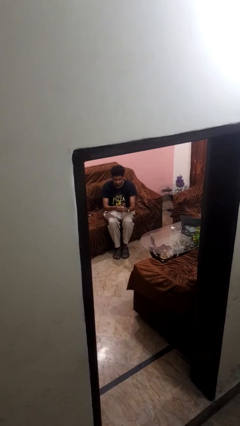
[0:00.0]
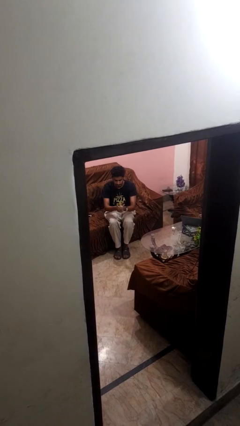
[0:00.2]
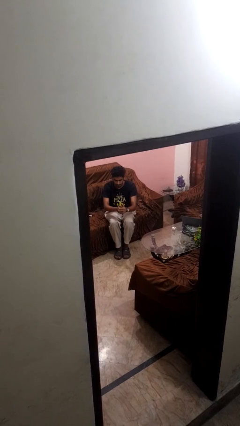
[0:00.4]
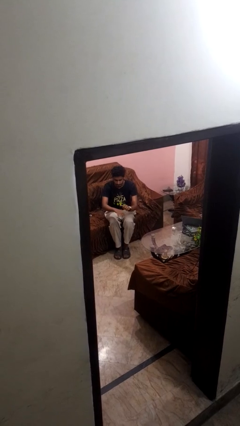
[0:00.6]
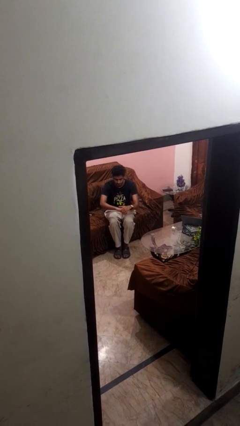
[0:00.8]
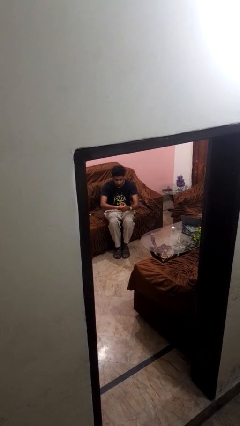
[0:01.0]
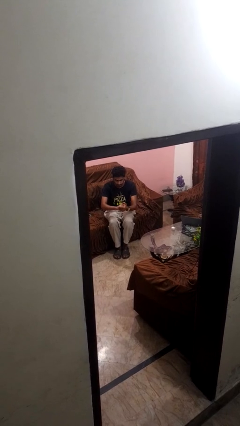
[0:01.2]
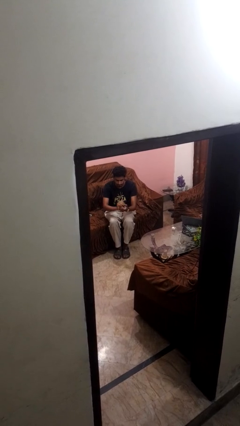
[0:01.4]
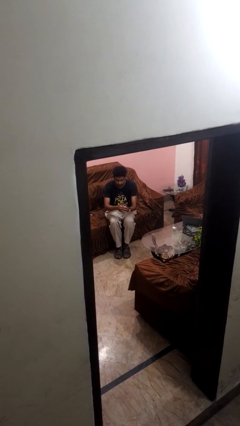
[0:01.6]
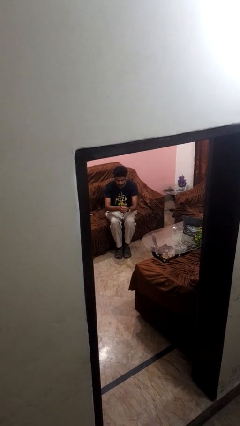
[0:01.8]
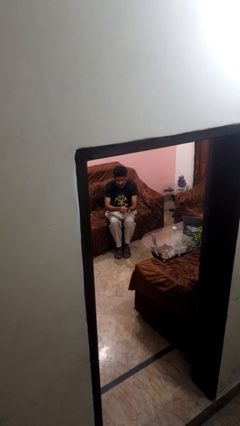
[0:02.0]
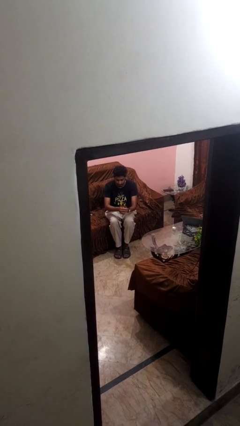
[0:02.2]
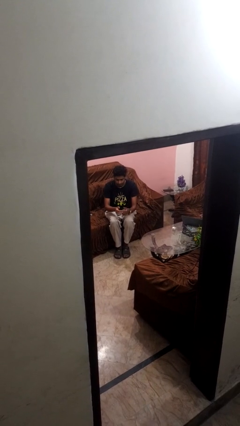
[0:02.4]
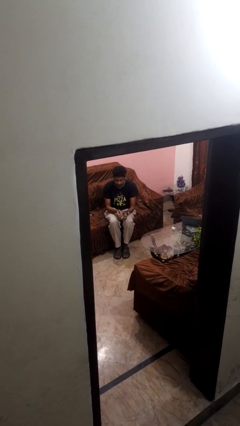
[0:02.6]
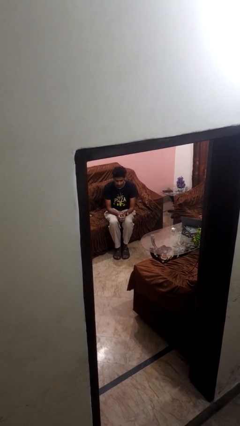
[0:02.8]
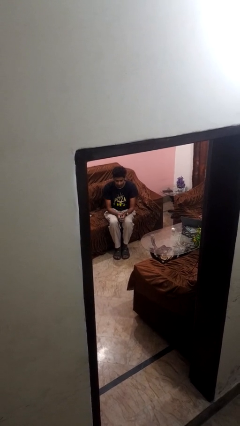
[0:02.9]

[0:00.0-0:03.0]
person cracks knuckles

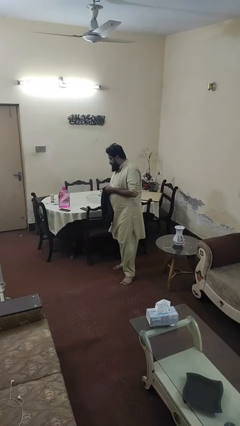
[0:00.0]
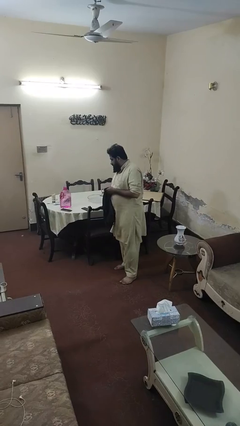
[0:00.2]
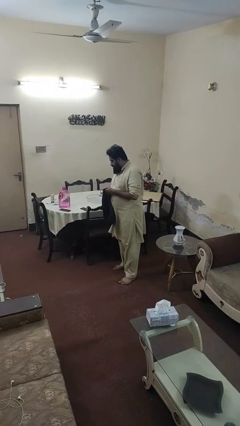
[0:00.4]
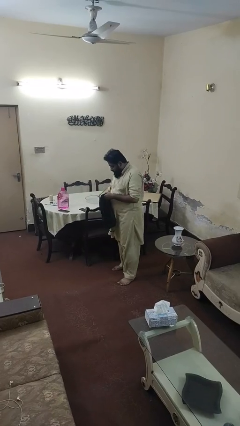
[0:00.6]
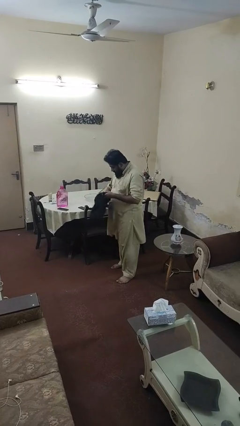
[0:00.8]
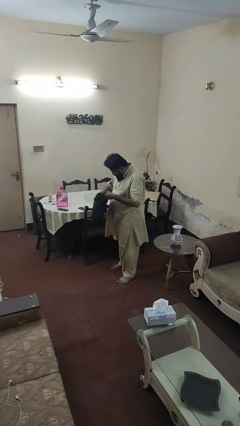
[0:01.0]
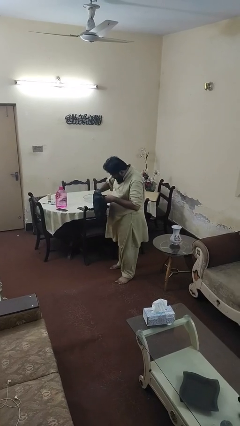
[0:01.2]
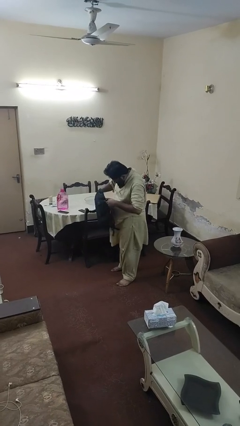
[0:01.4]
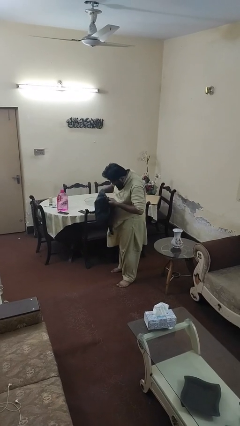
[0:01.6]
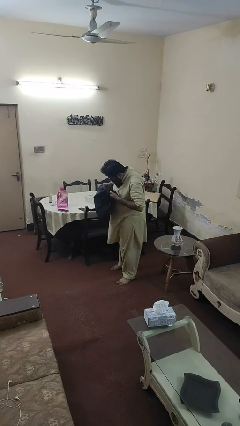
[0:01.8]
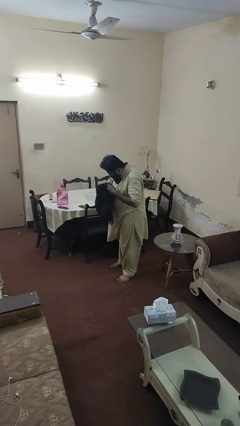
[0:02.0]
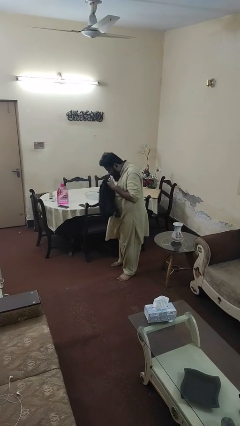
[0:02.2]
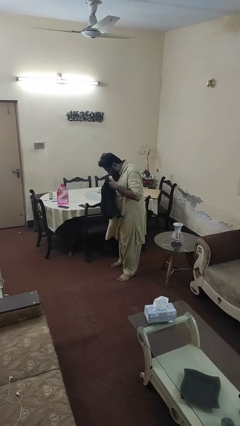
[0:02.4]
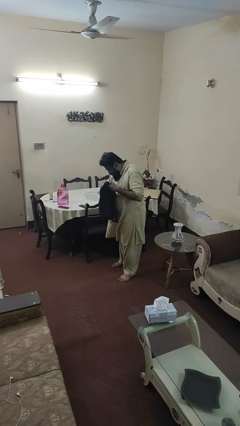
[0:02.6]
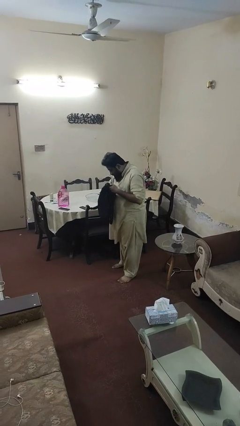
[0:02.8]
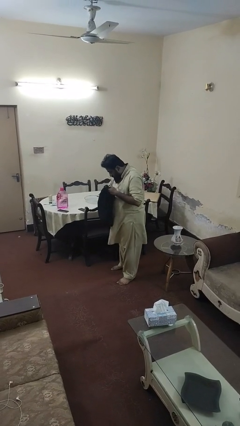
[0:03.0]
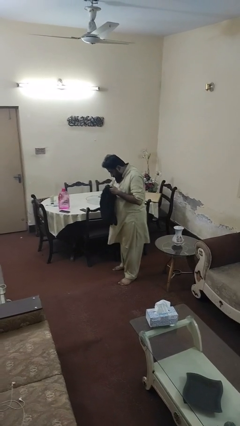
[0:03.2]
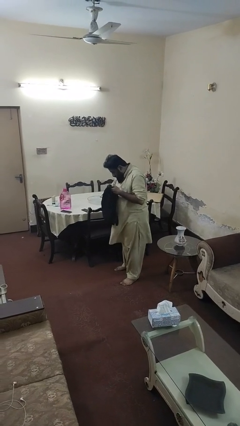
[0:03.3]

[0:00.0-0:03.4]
person searches in backpack

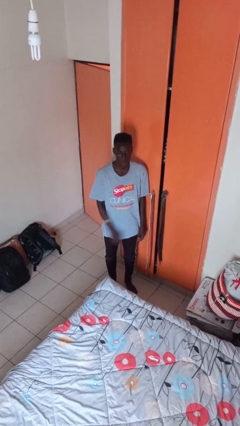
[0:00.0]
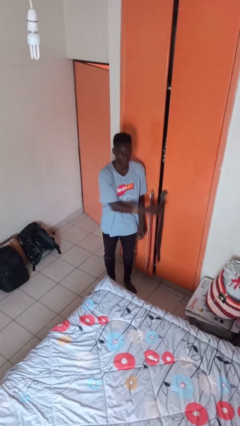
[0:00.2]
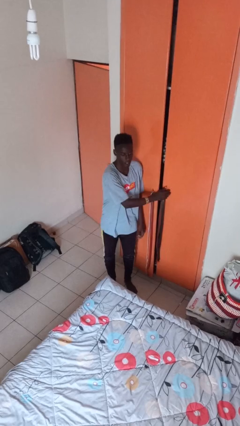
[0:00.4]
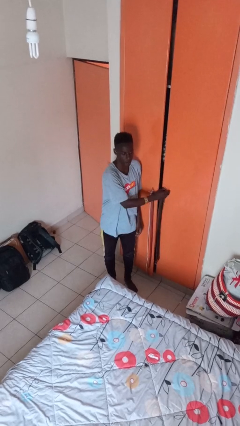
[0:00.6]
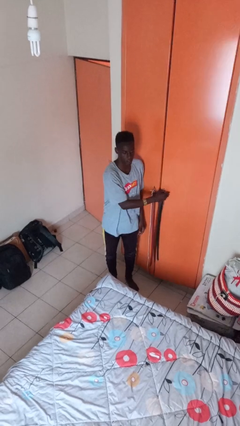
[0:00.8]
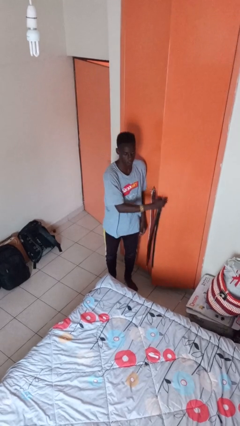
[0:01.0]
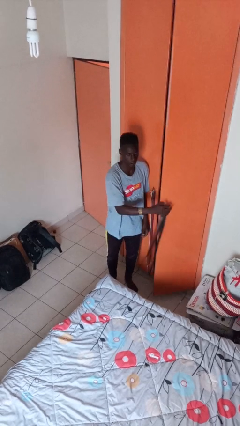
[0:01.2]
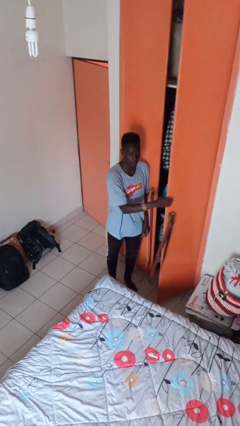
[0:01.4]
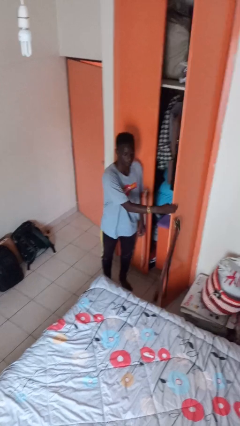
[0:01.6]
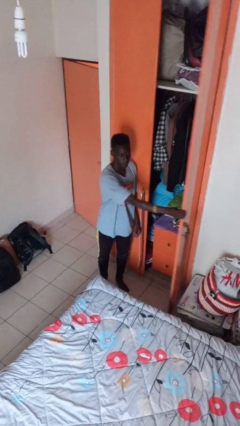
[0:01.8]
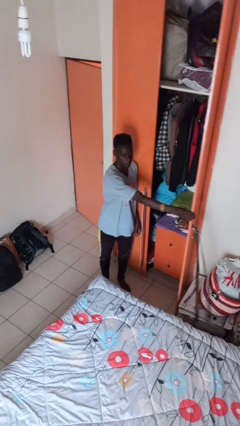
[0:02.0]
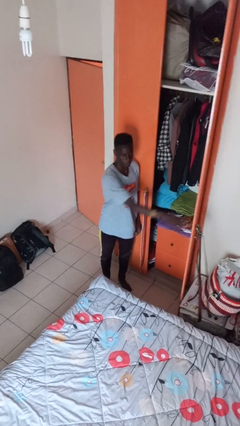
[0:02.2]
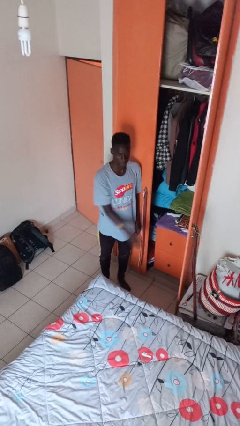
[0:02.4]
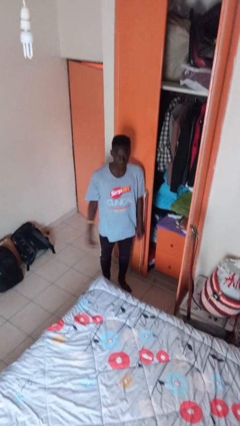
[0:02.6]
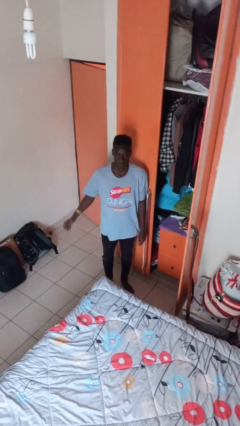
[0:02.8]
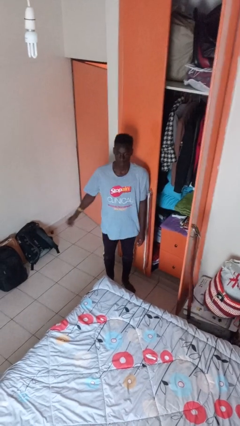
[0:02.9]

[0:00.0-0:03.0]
person opens closet door

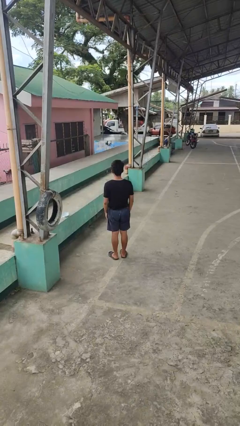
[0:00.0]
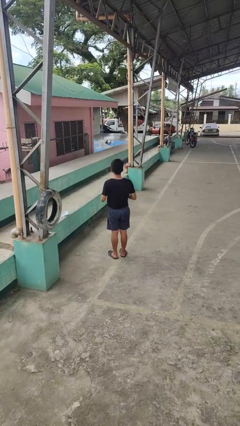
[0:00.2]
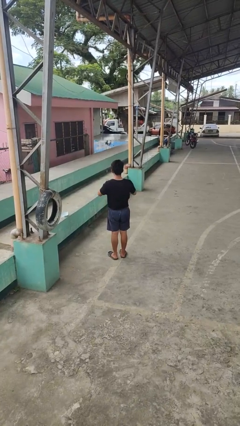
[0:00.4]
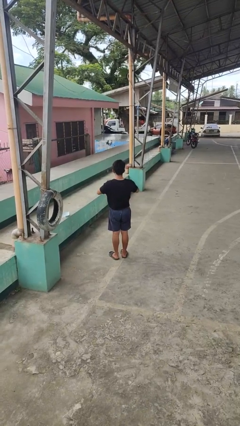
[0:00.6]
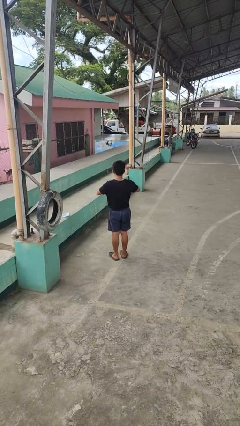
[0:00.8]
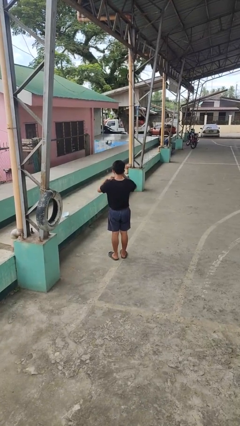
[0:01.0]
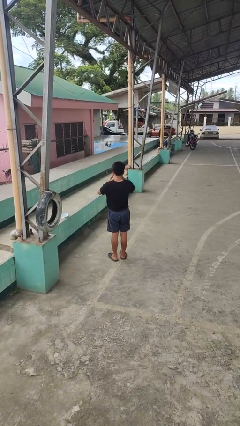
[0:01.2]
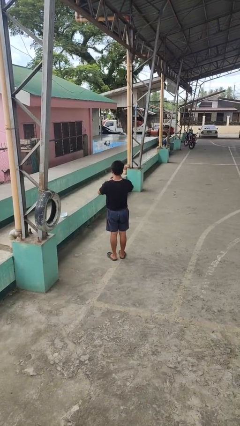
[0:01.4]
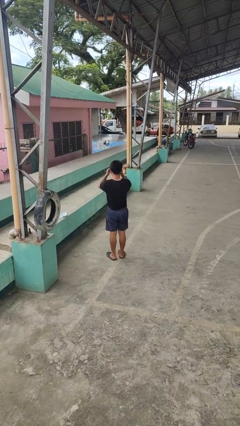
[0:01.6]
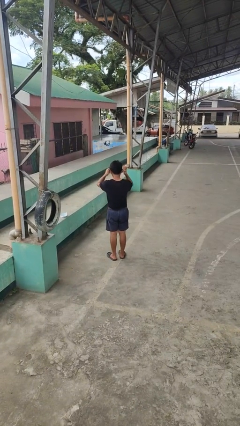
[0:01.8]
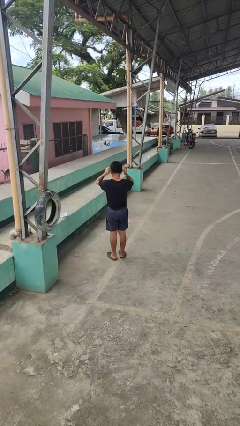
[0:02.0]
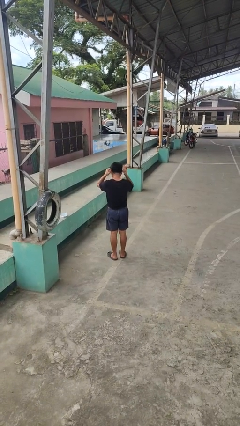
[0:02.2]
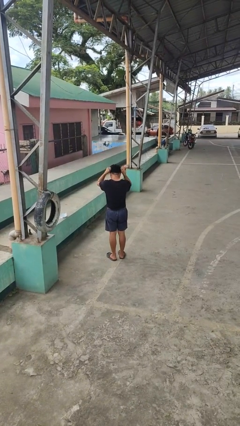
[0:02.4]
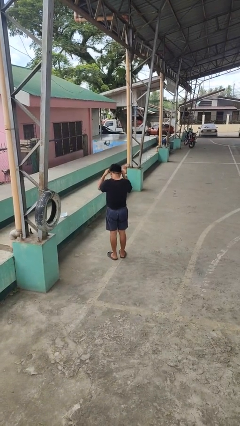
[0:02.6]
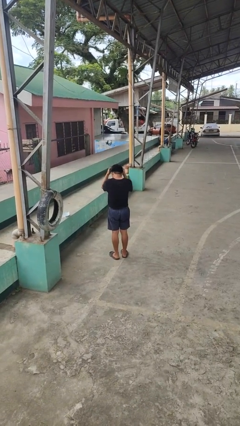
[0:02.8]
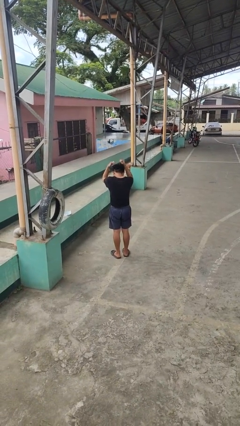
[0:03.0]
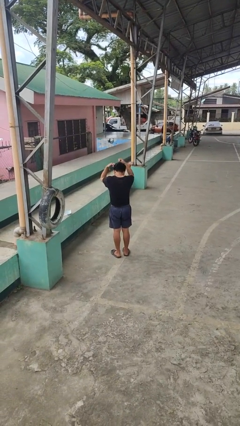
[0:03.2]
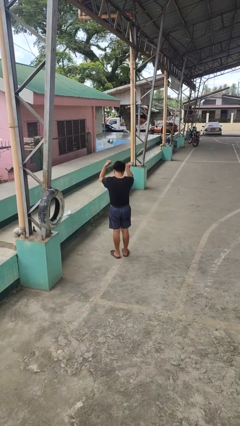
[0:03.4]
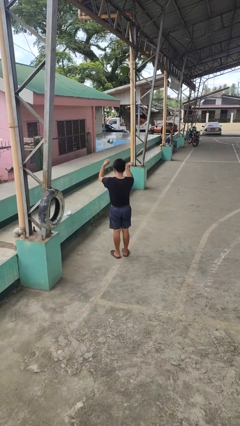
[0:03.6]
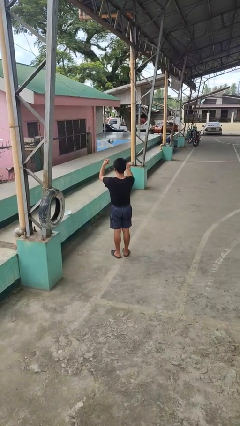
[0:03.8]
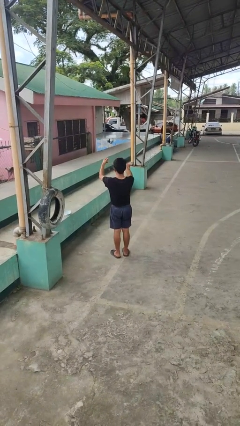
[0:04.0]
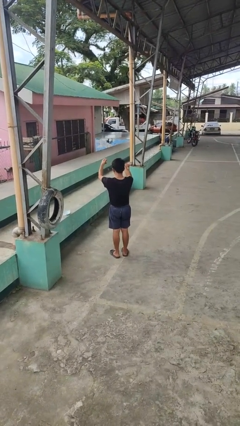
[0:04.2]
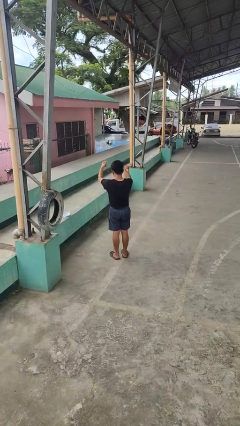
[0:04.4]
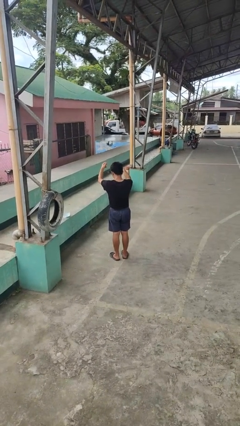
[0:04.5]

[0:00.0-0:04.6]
person takes off necklace

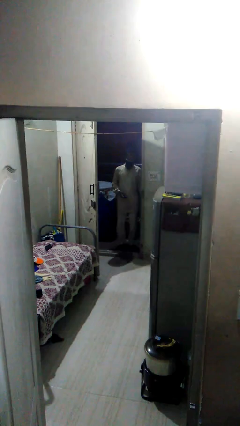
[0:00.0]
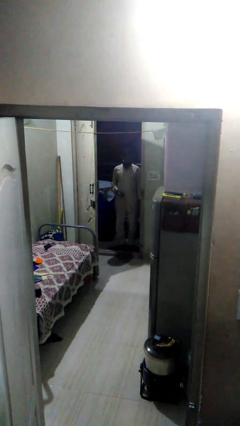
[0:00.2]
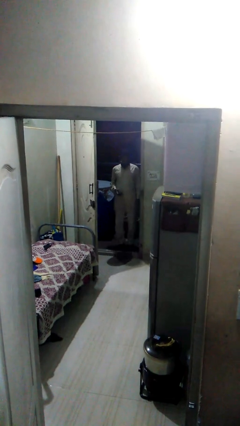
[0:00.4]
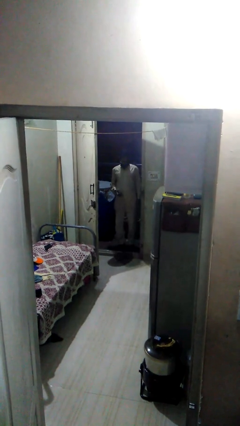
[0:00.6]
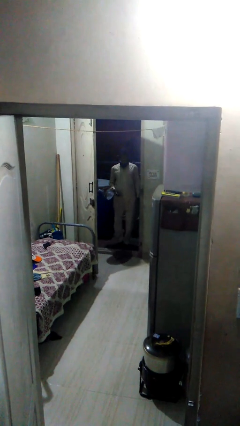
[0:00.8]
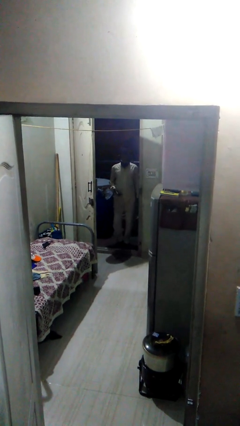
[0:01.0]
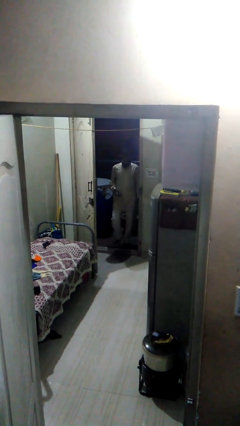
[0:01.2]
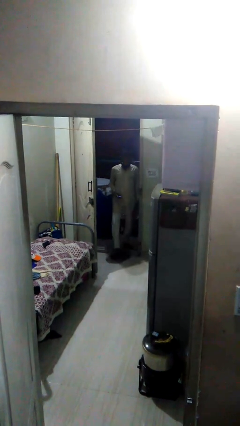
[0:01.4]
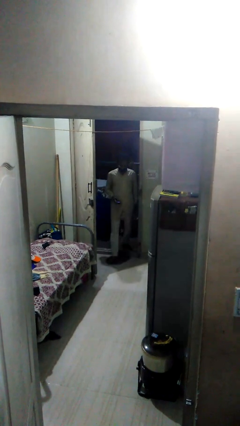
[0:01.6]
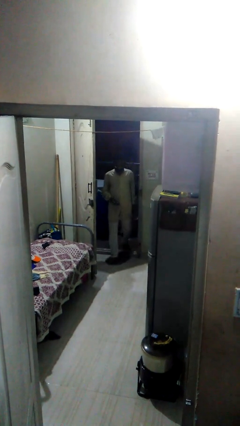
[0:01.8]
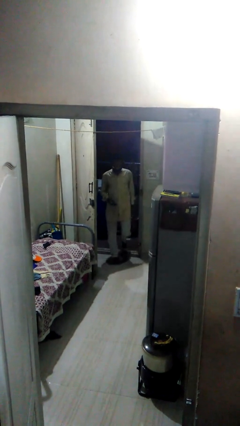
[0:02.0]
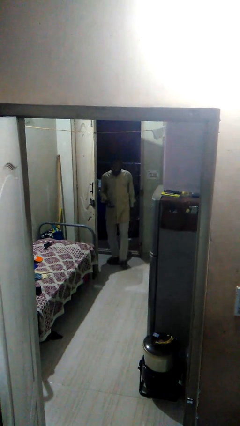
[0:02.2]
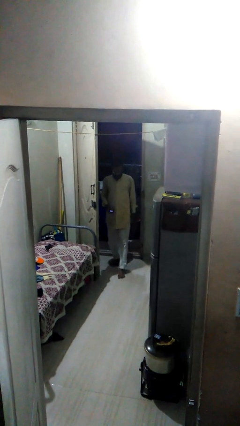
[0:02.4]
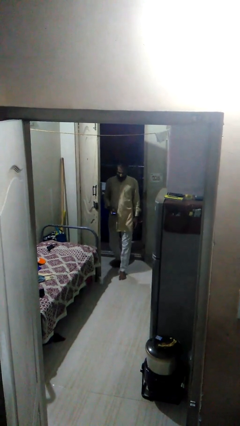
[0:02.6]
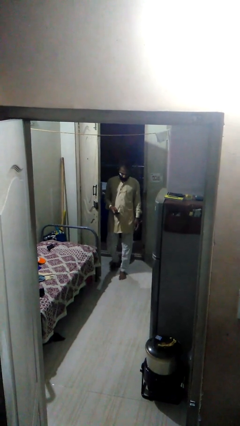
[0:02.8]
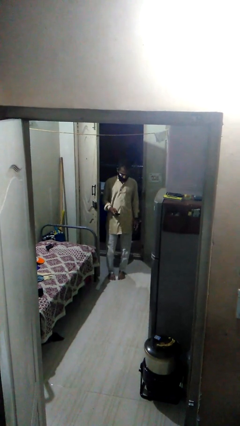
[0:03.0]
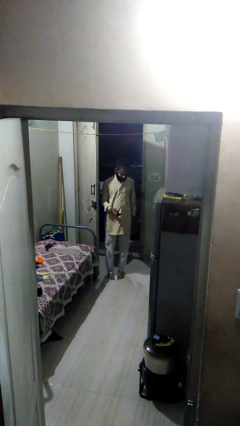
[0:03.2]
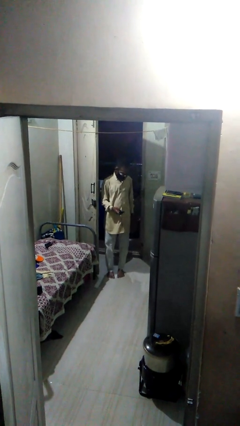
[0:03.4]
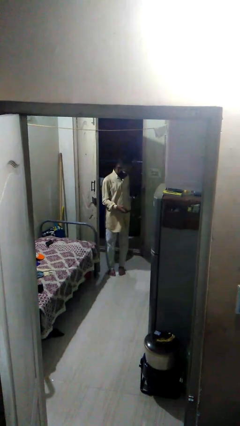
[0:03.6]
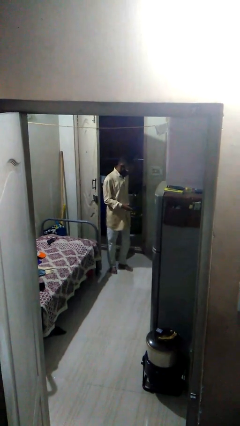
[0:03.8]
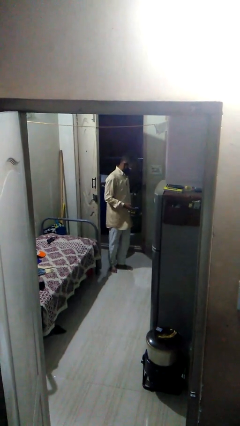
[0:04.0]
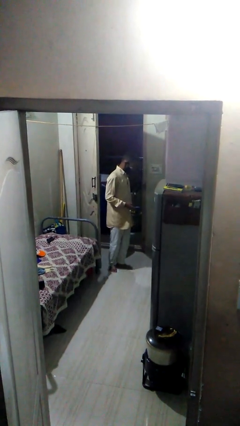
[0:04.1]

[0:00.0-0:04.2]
person enters scene through structure
